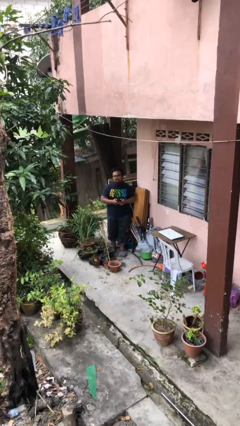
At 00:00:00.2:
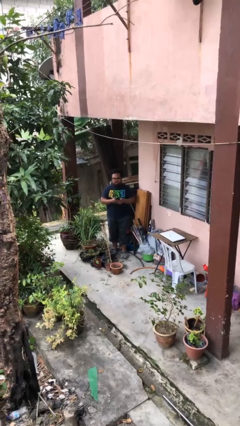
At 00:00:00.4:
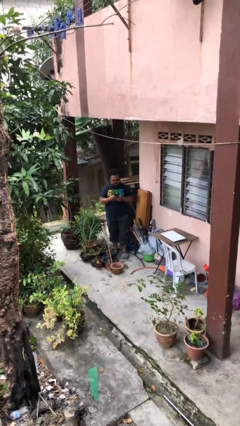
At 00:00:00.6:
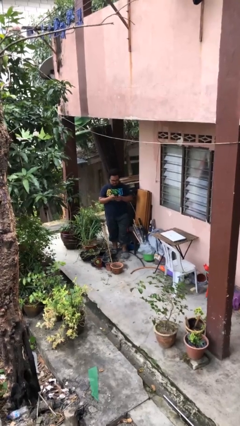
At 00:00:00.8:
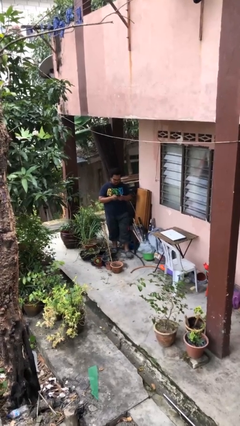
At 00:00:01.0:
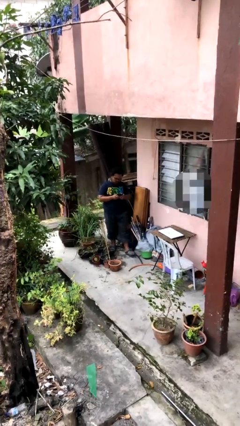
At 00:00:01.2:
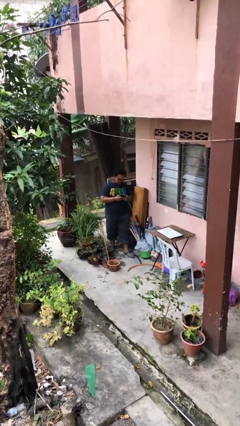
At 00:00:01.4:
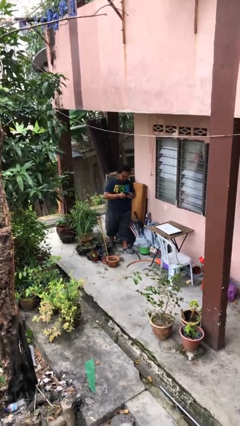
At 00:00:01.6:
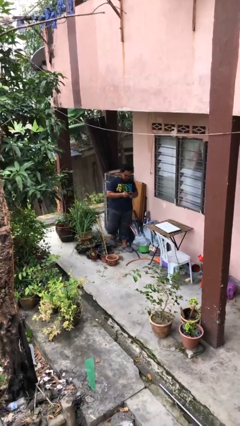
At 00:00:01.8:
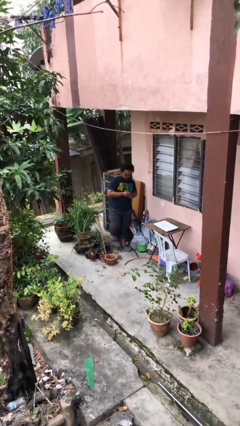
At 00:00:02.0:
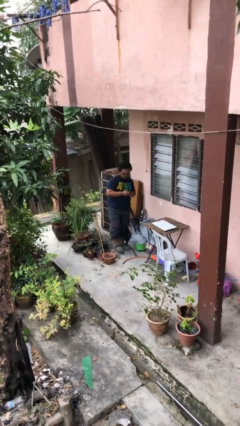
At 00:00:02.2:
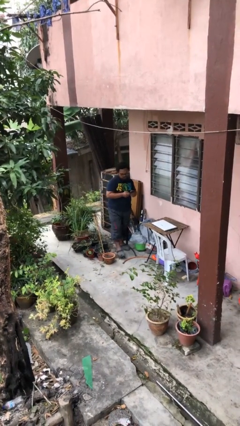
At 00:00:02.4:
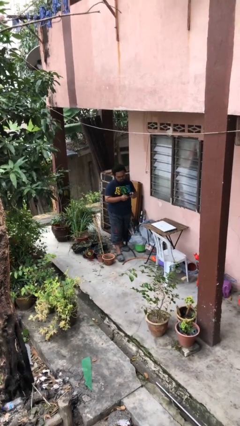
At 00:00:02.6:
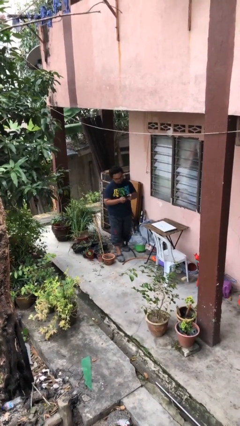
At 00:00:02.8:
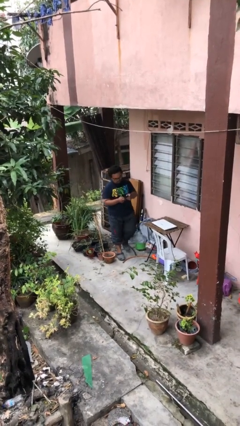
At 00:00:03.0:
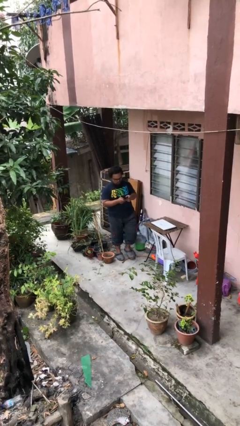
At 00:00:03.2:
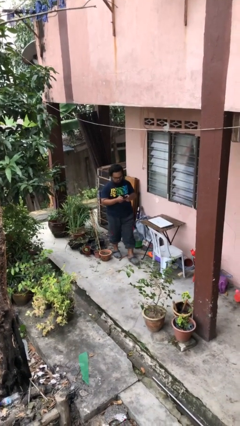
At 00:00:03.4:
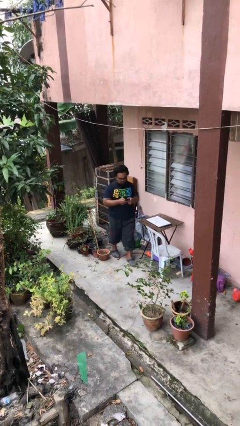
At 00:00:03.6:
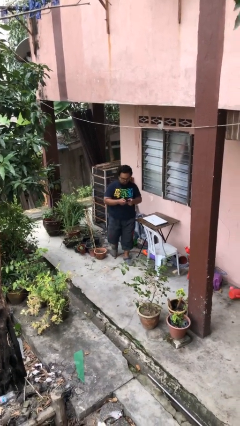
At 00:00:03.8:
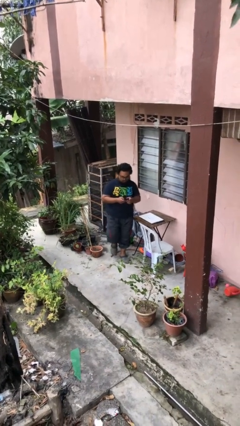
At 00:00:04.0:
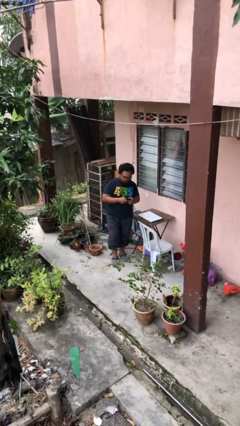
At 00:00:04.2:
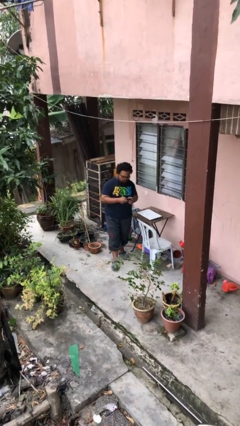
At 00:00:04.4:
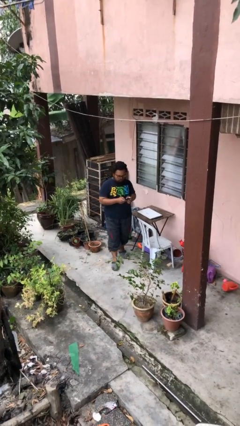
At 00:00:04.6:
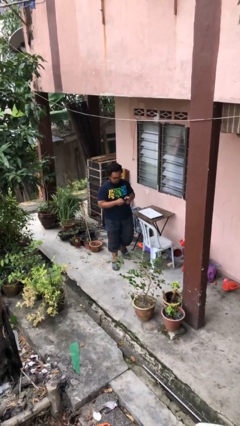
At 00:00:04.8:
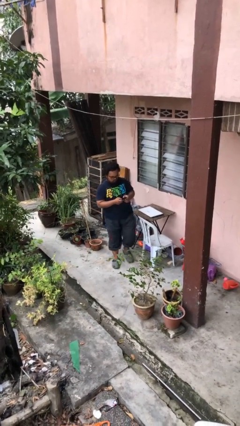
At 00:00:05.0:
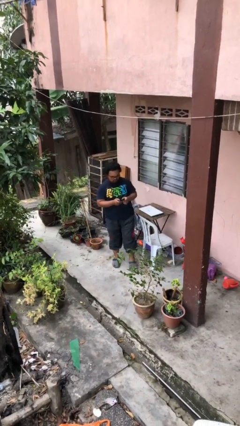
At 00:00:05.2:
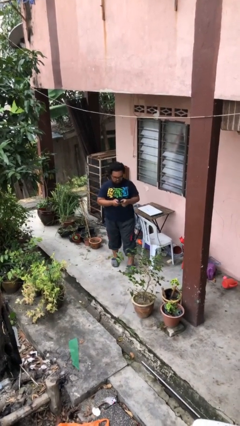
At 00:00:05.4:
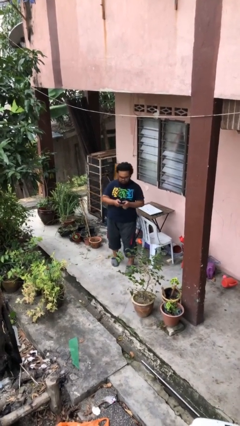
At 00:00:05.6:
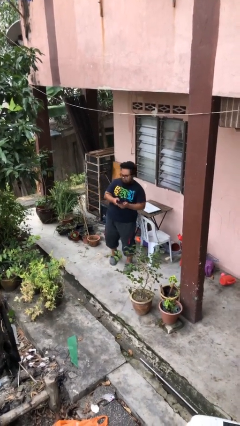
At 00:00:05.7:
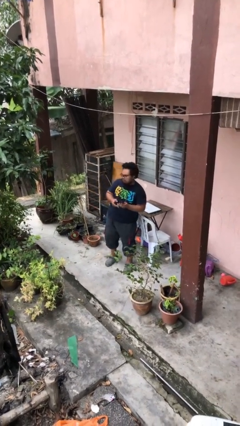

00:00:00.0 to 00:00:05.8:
person texts on phone

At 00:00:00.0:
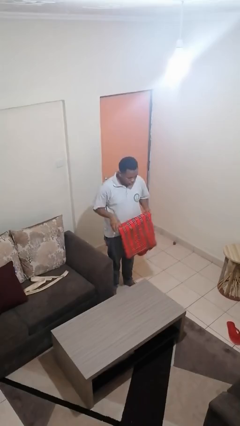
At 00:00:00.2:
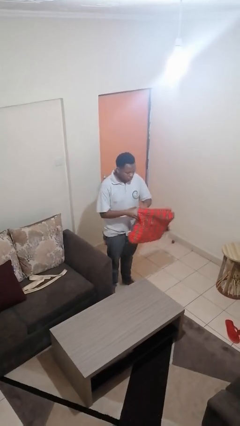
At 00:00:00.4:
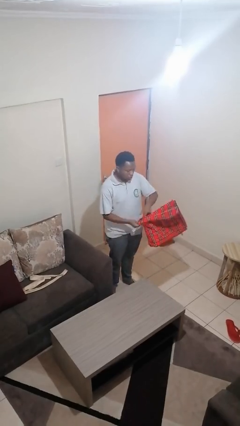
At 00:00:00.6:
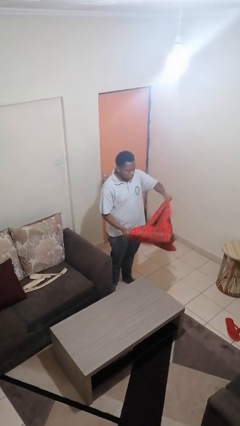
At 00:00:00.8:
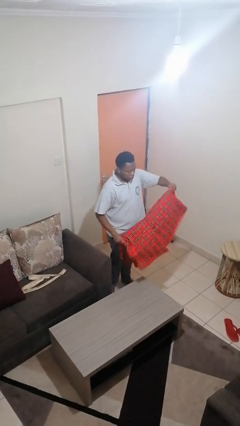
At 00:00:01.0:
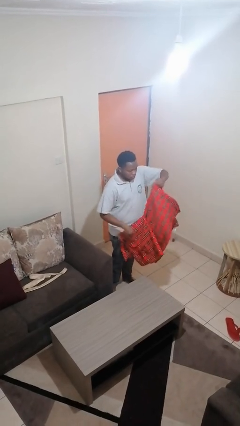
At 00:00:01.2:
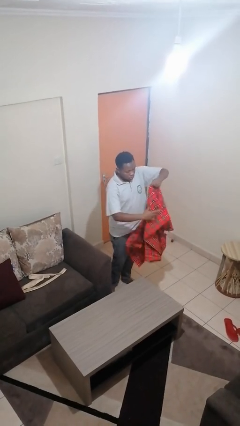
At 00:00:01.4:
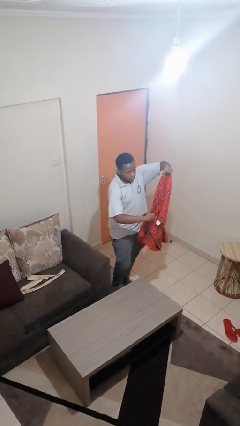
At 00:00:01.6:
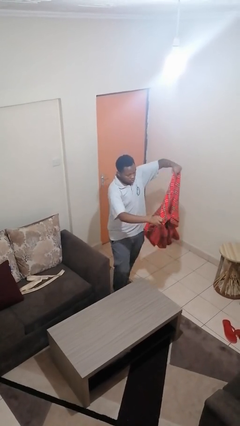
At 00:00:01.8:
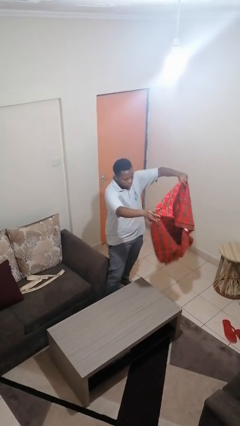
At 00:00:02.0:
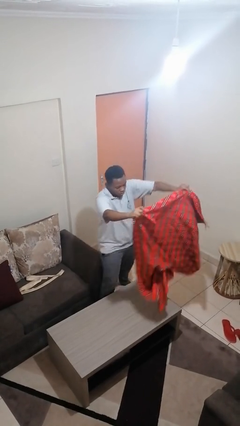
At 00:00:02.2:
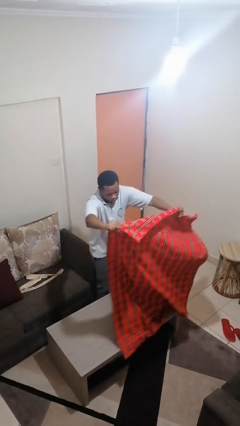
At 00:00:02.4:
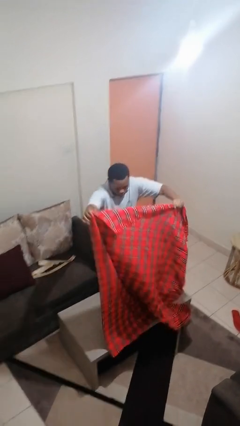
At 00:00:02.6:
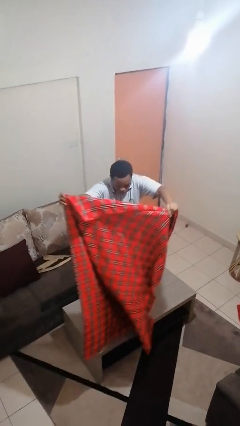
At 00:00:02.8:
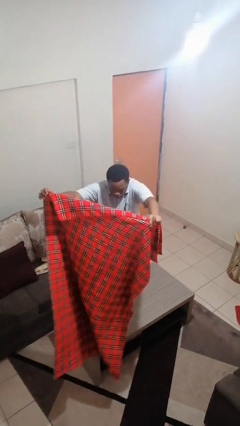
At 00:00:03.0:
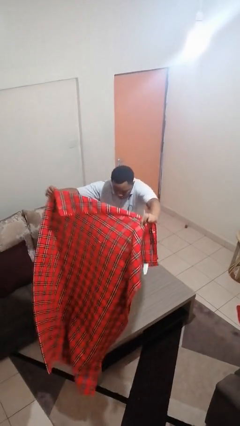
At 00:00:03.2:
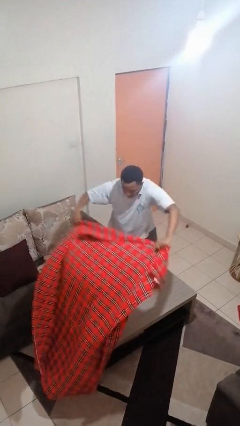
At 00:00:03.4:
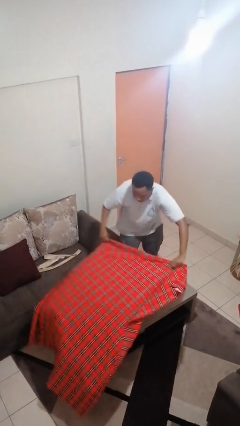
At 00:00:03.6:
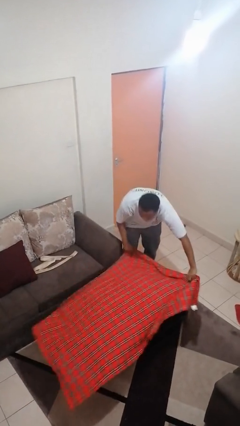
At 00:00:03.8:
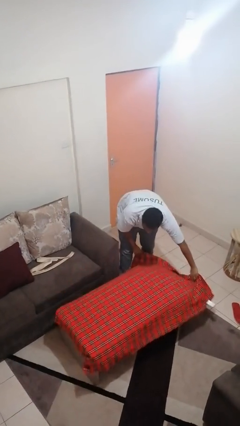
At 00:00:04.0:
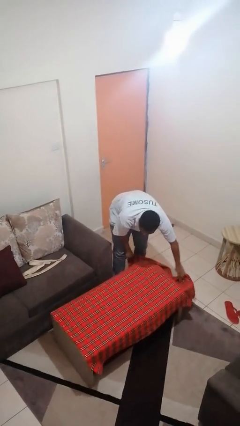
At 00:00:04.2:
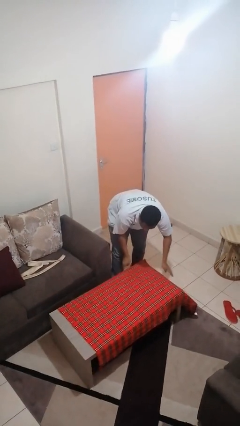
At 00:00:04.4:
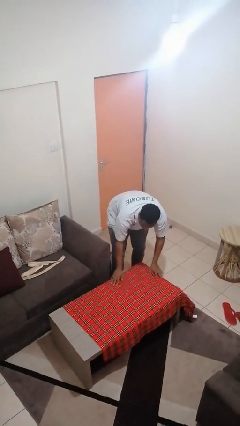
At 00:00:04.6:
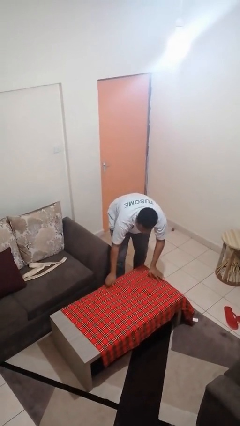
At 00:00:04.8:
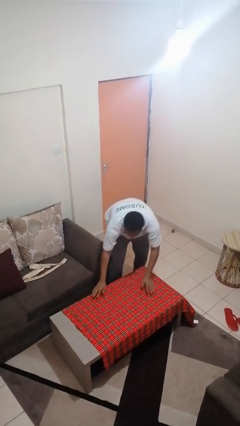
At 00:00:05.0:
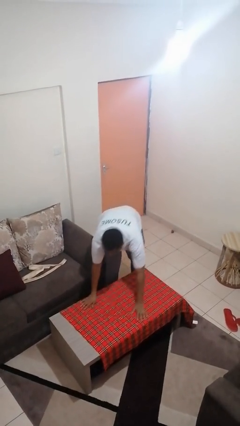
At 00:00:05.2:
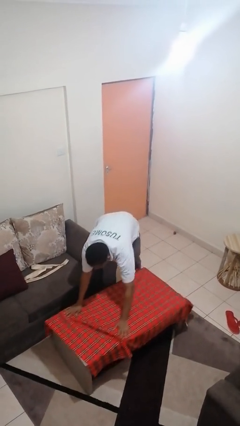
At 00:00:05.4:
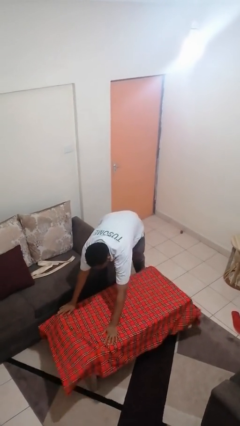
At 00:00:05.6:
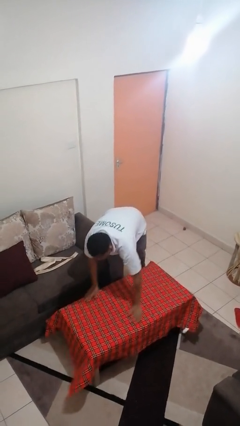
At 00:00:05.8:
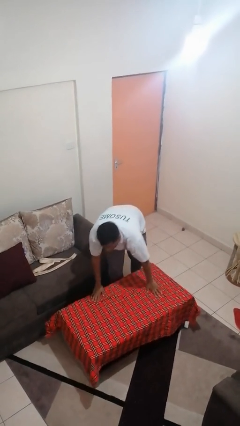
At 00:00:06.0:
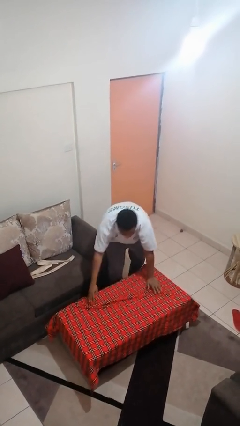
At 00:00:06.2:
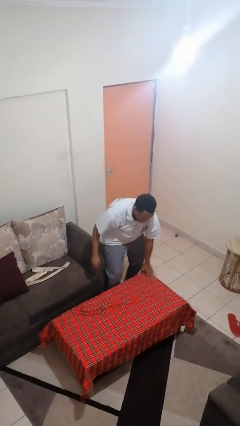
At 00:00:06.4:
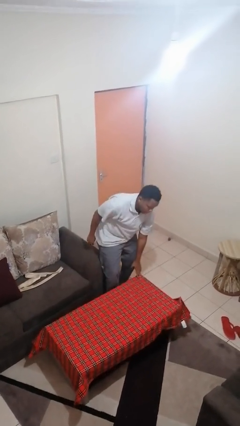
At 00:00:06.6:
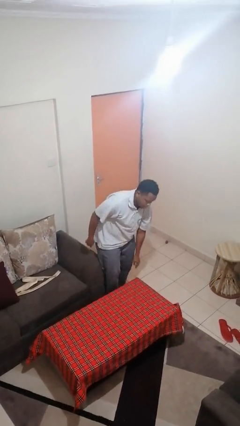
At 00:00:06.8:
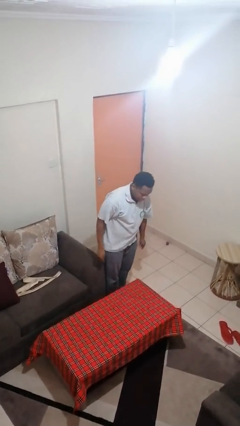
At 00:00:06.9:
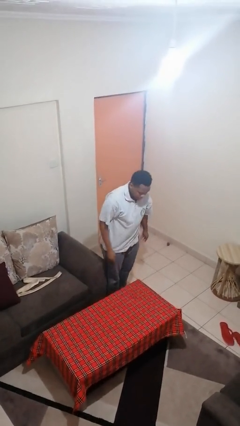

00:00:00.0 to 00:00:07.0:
person spreads tablecloth

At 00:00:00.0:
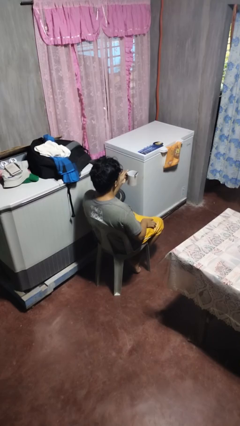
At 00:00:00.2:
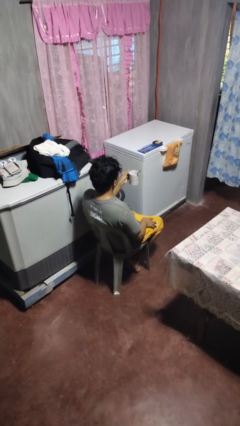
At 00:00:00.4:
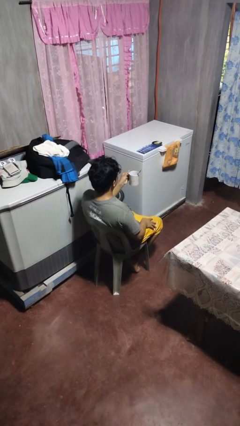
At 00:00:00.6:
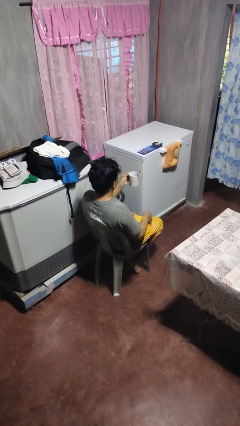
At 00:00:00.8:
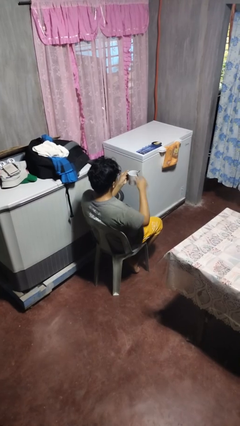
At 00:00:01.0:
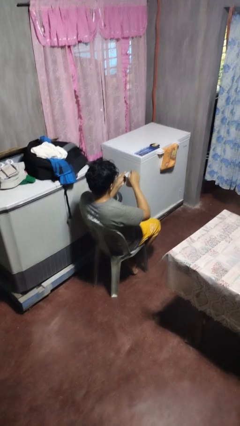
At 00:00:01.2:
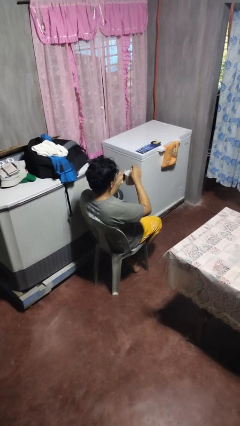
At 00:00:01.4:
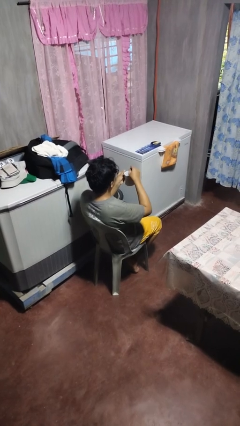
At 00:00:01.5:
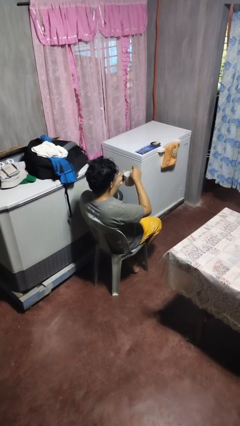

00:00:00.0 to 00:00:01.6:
person stirs mug

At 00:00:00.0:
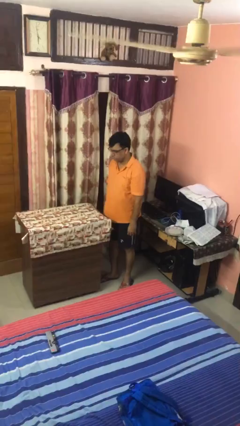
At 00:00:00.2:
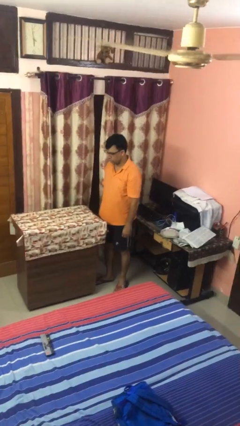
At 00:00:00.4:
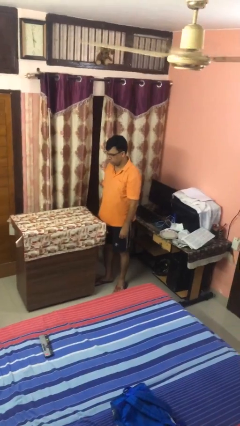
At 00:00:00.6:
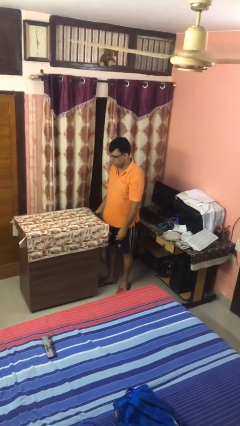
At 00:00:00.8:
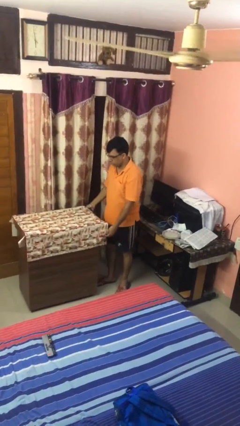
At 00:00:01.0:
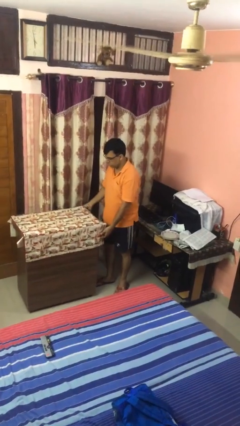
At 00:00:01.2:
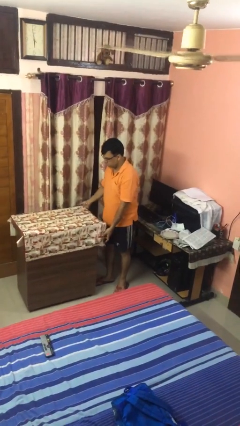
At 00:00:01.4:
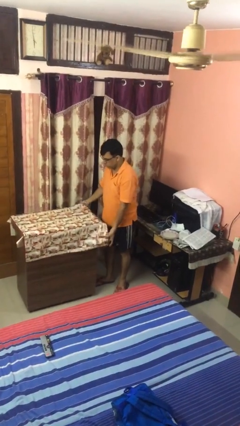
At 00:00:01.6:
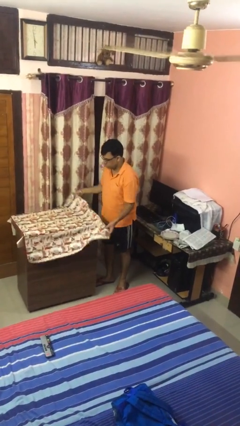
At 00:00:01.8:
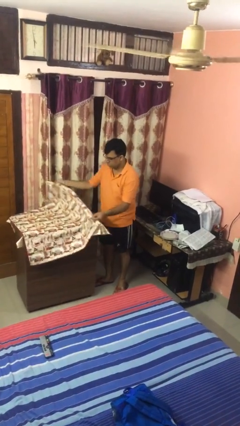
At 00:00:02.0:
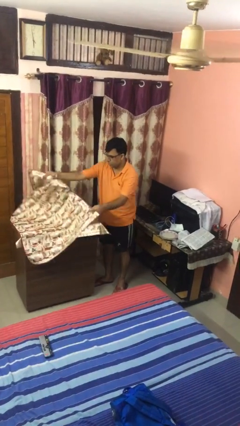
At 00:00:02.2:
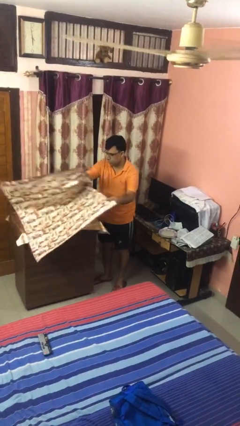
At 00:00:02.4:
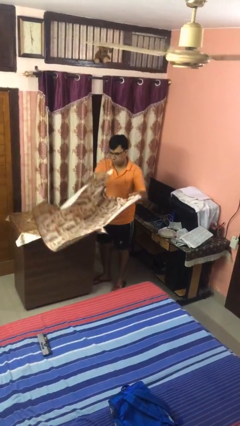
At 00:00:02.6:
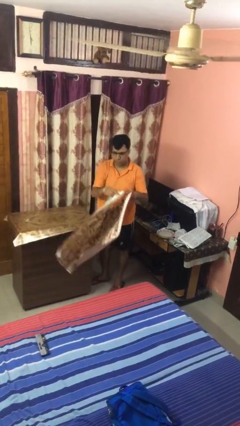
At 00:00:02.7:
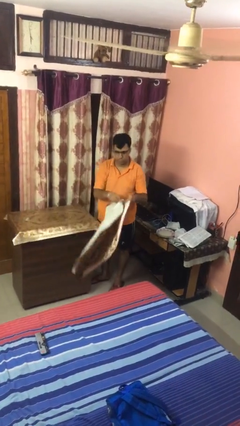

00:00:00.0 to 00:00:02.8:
person folds tablecloth
